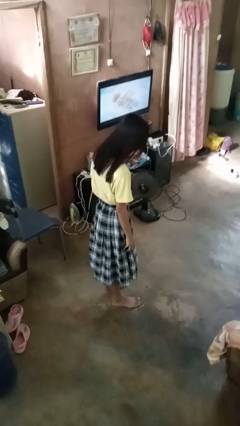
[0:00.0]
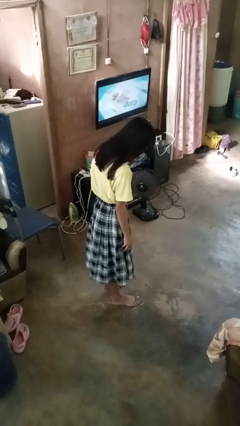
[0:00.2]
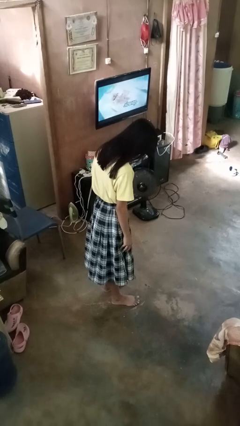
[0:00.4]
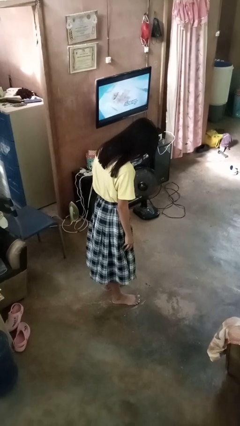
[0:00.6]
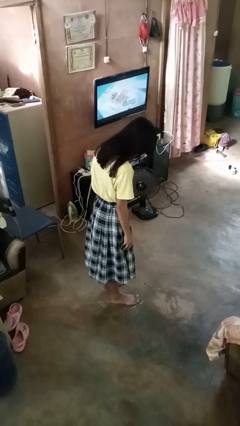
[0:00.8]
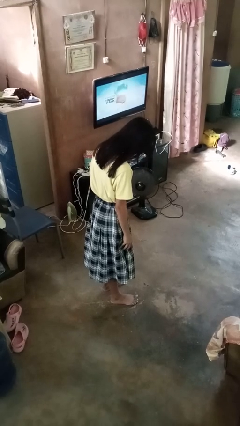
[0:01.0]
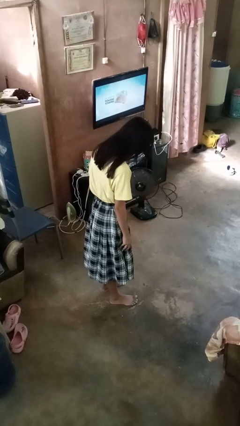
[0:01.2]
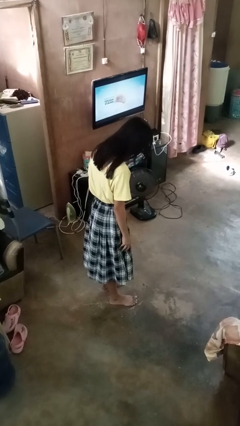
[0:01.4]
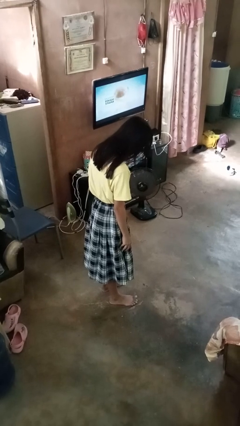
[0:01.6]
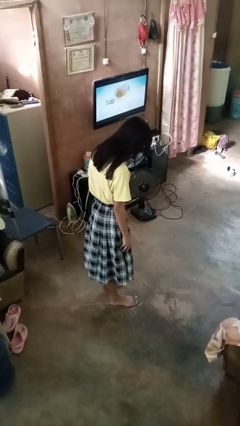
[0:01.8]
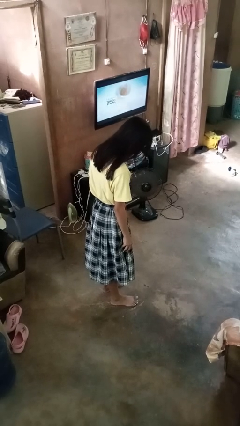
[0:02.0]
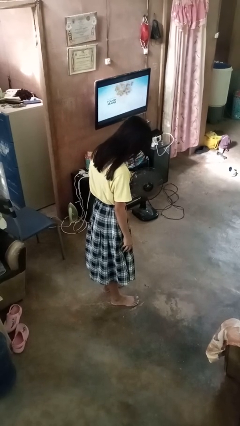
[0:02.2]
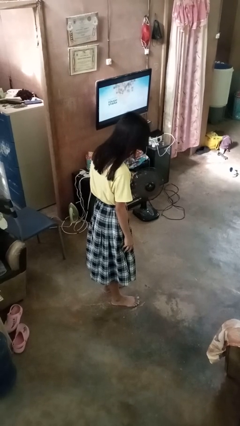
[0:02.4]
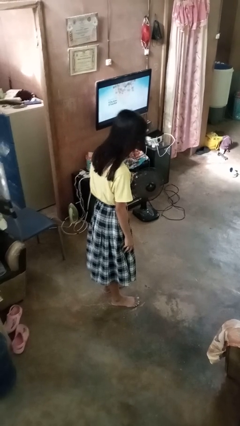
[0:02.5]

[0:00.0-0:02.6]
person bows

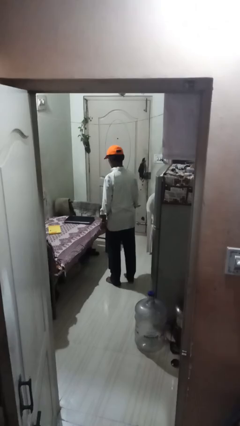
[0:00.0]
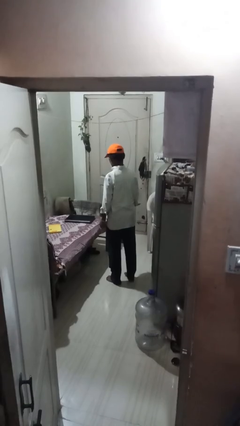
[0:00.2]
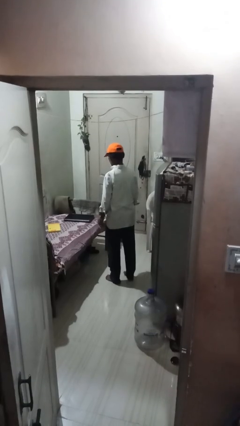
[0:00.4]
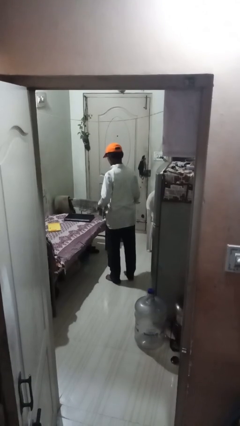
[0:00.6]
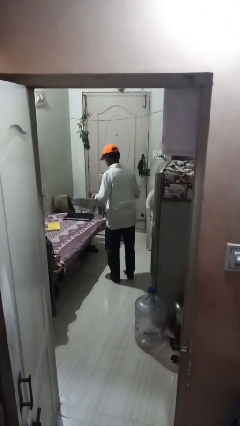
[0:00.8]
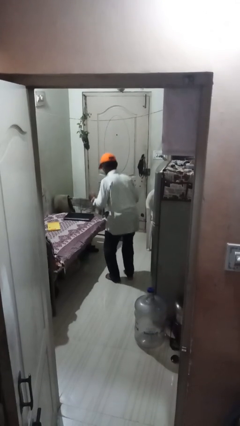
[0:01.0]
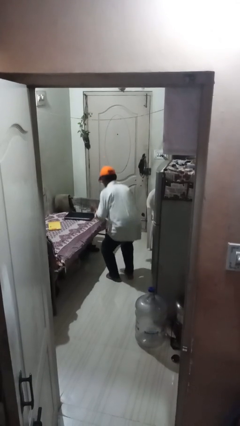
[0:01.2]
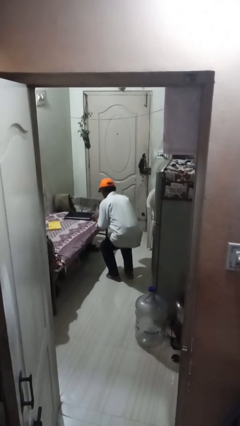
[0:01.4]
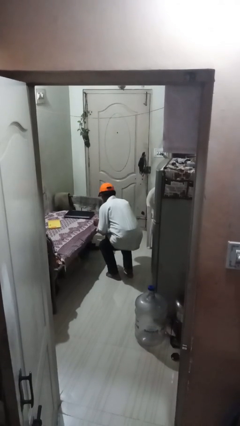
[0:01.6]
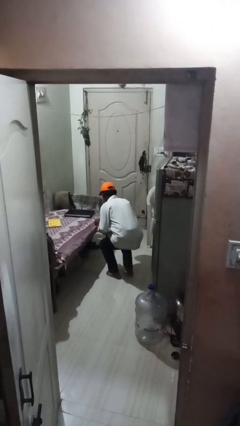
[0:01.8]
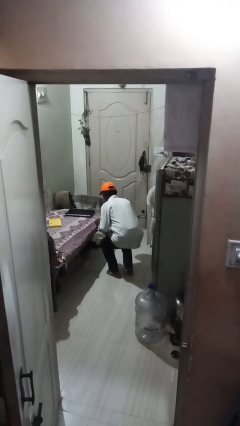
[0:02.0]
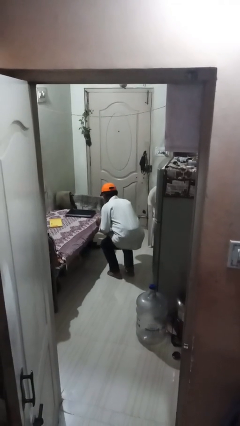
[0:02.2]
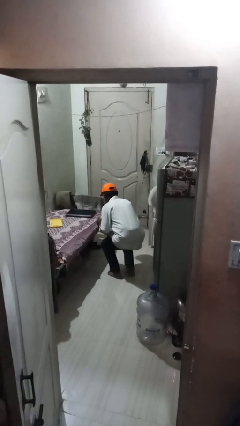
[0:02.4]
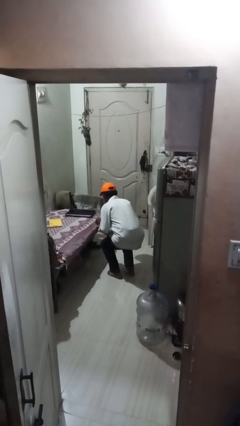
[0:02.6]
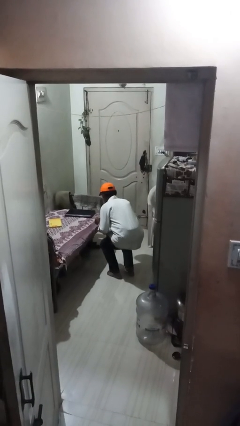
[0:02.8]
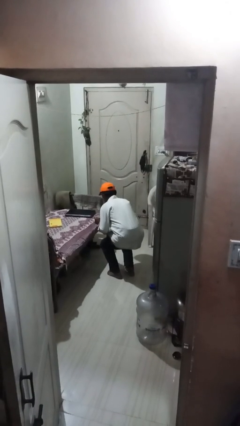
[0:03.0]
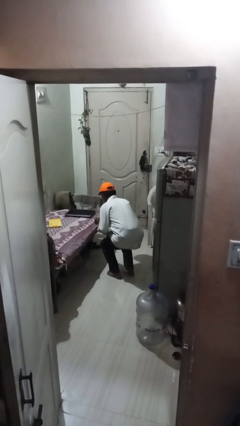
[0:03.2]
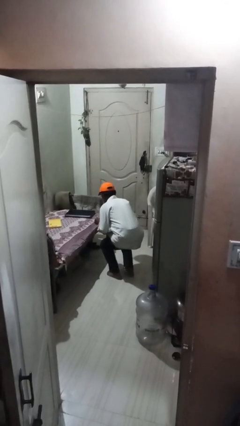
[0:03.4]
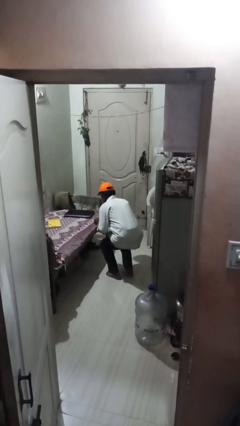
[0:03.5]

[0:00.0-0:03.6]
person squats

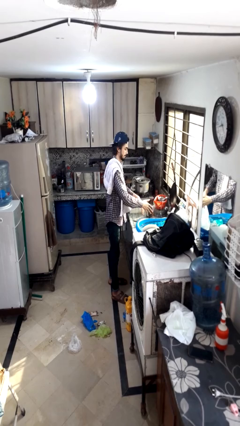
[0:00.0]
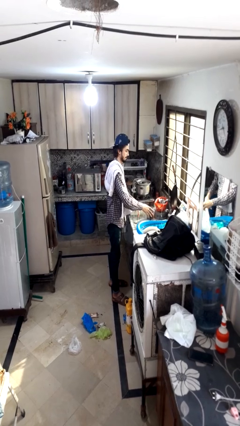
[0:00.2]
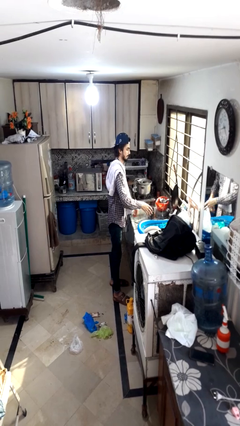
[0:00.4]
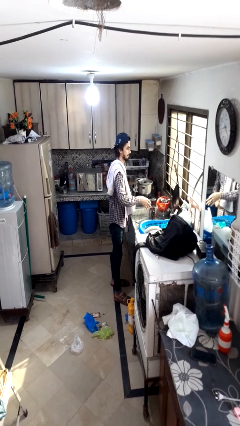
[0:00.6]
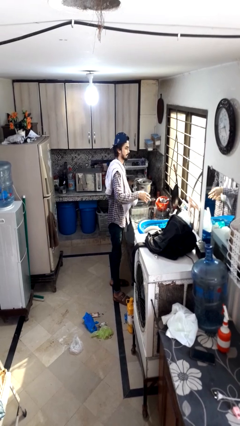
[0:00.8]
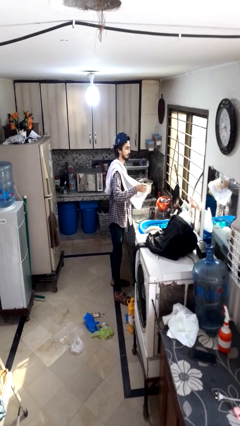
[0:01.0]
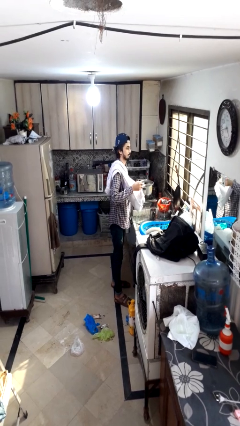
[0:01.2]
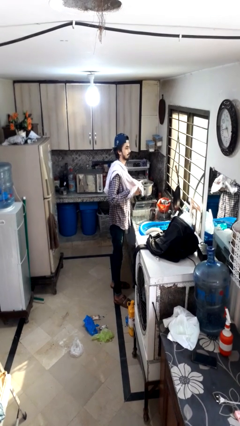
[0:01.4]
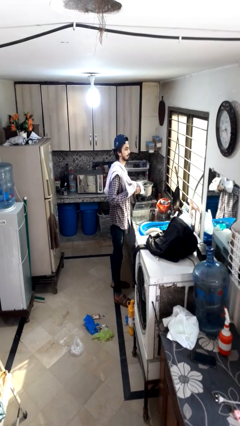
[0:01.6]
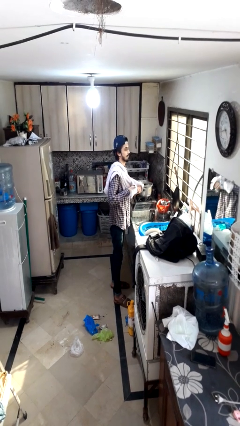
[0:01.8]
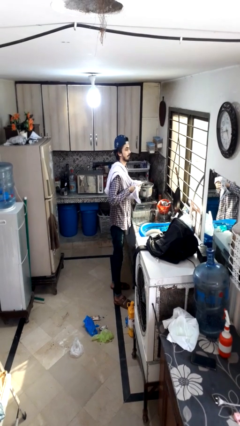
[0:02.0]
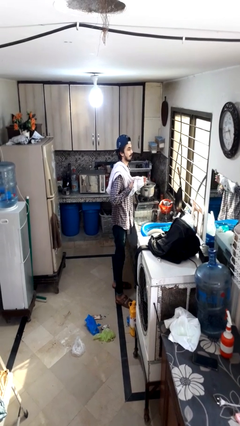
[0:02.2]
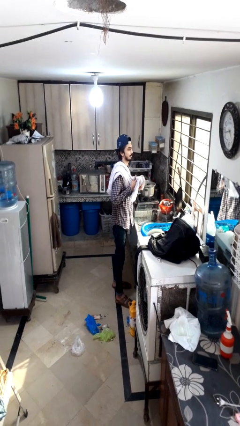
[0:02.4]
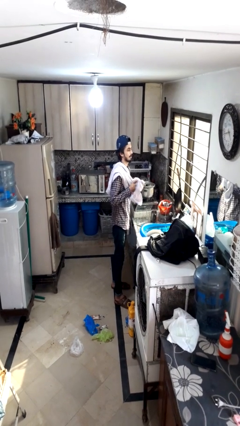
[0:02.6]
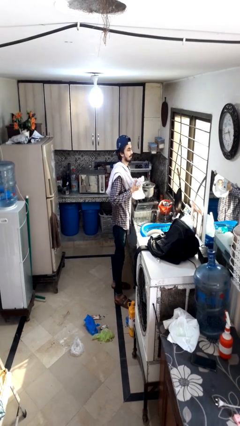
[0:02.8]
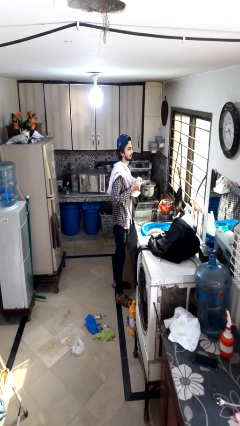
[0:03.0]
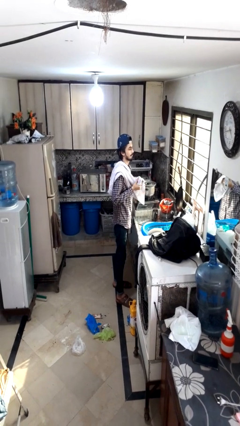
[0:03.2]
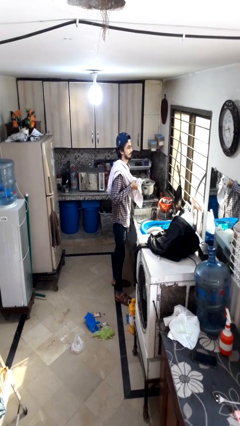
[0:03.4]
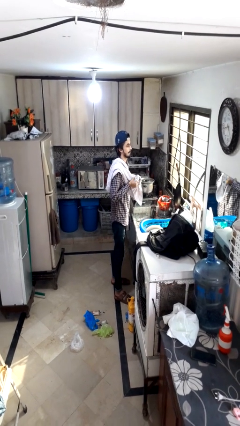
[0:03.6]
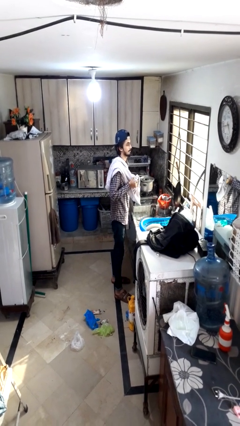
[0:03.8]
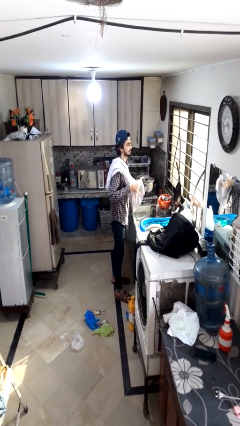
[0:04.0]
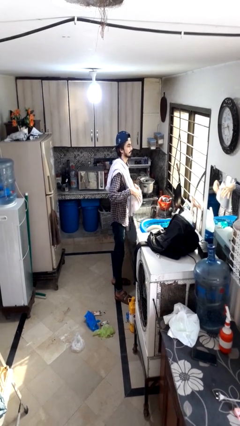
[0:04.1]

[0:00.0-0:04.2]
person dries hands with towel

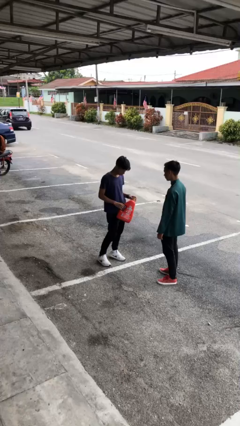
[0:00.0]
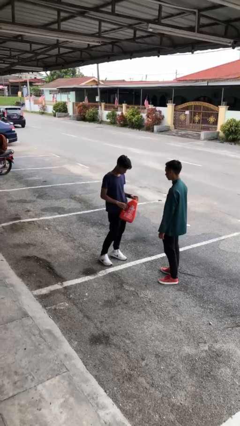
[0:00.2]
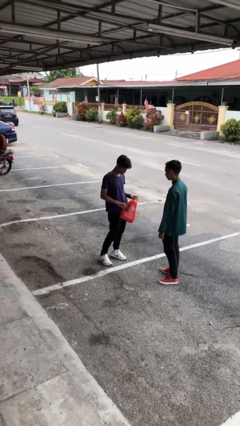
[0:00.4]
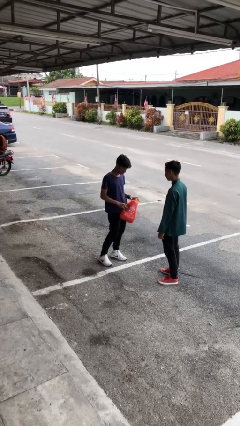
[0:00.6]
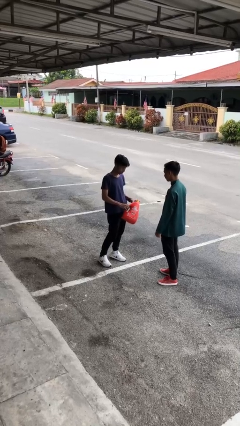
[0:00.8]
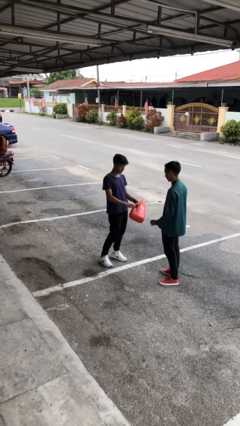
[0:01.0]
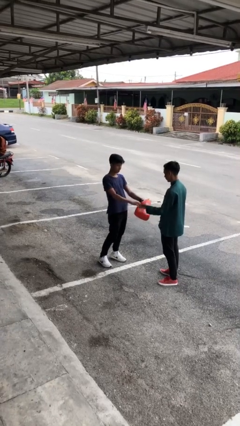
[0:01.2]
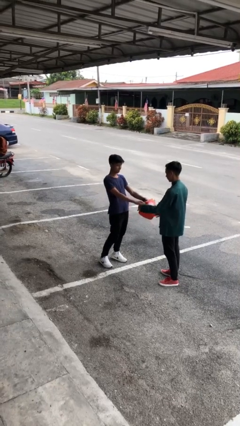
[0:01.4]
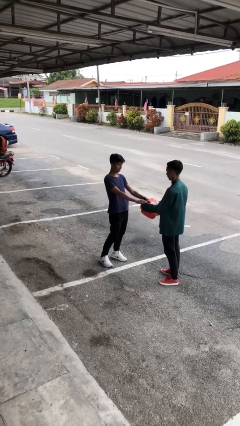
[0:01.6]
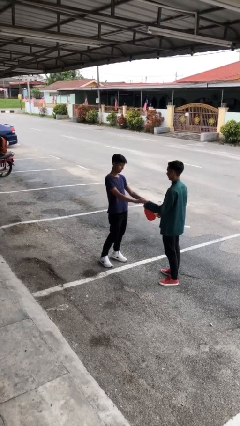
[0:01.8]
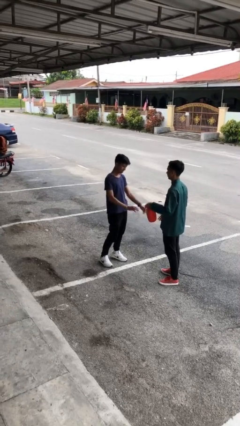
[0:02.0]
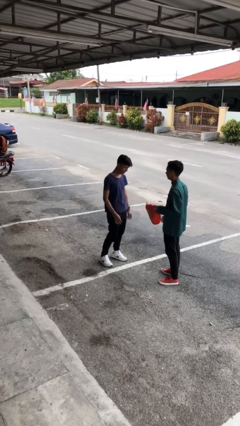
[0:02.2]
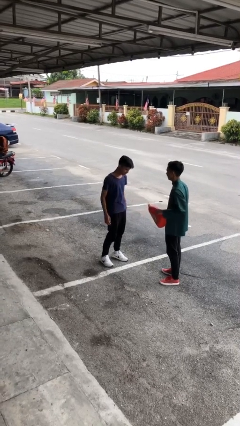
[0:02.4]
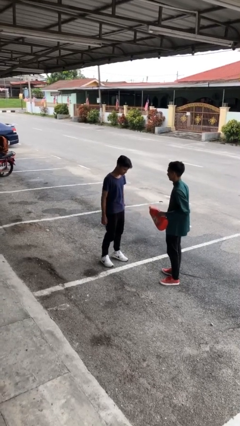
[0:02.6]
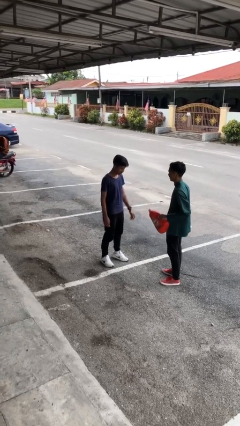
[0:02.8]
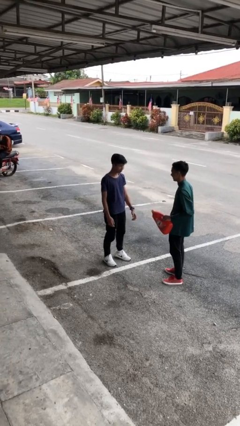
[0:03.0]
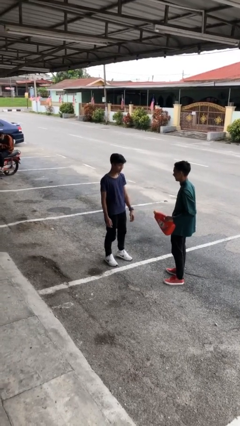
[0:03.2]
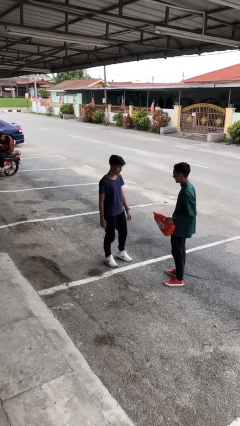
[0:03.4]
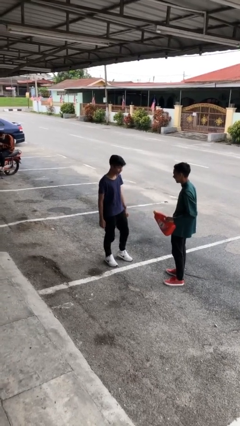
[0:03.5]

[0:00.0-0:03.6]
person transfers object to person

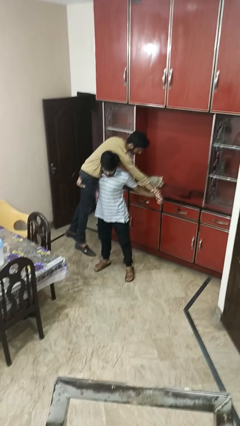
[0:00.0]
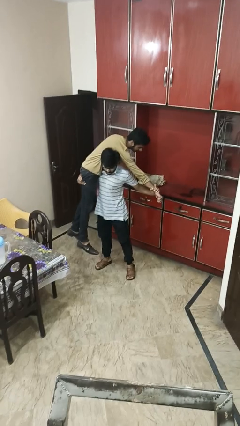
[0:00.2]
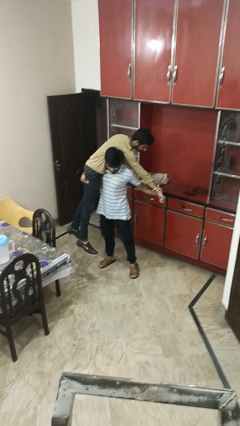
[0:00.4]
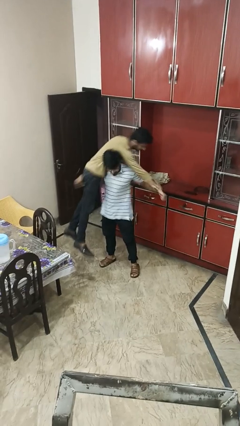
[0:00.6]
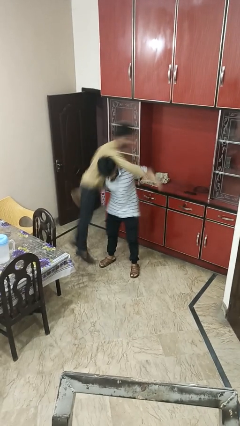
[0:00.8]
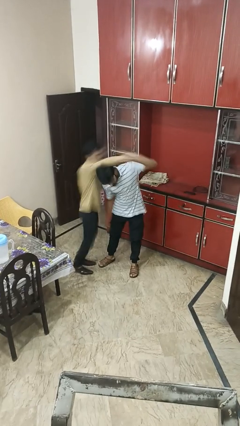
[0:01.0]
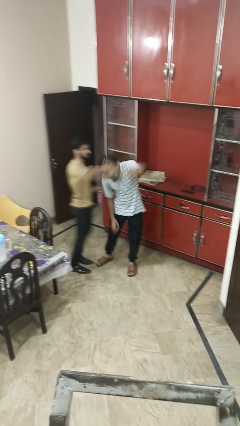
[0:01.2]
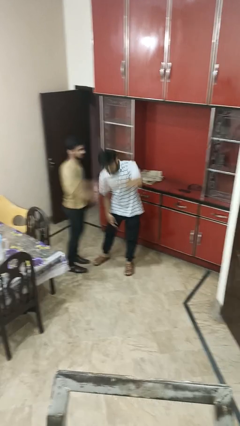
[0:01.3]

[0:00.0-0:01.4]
person puts down person

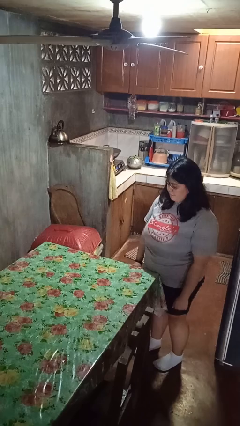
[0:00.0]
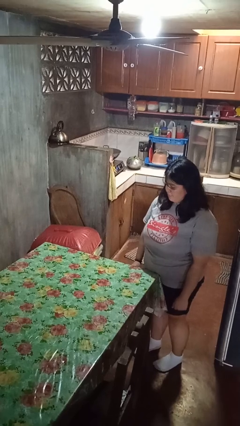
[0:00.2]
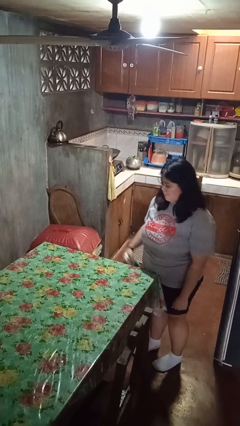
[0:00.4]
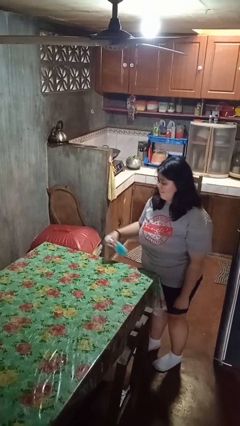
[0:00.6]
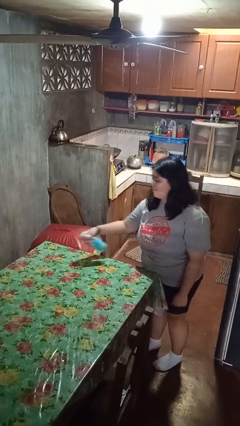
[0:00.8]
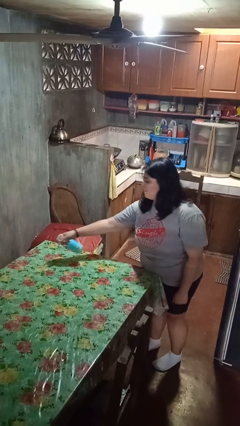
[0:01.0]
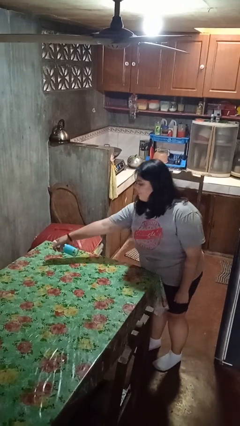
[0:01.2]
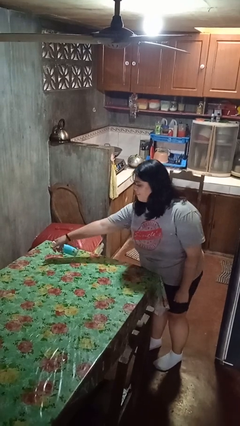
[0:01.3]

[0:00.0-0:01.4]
person sprays from bottle

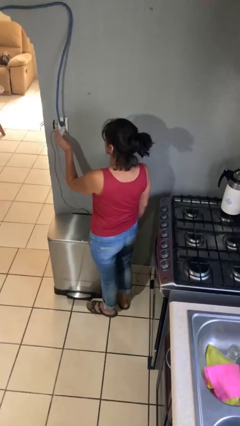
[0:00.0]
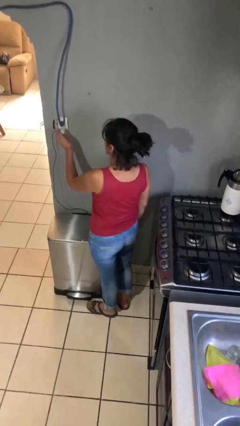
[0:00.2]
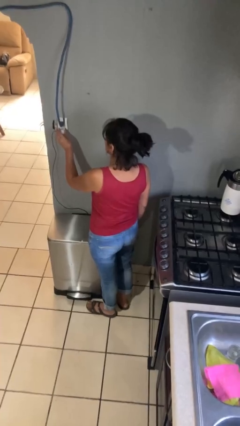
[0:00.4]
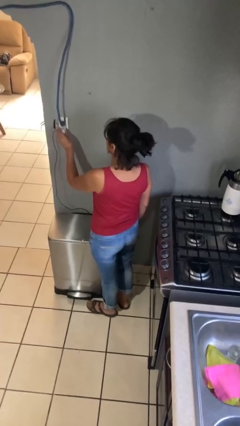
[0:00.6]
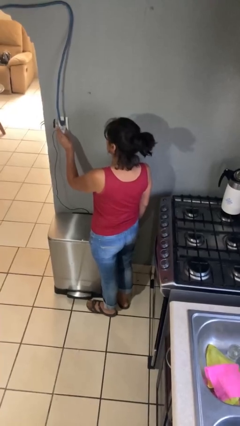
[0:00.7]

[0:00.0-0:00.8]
person plugs into electrical socket
